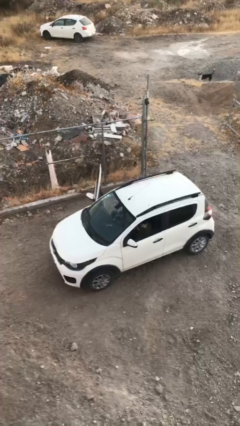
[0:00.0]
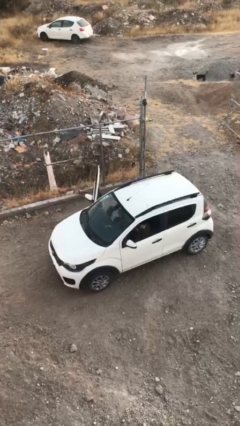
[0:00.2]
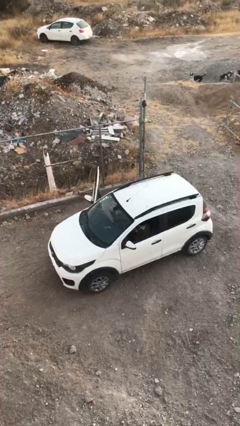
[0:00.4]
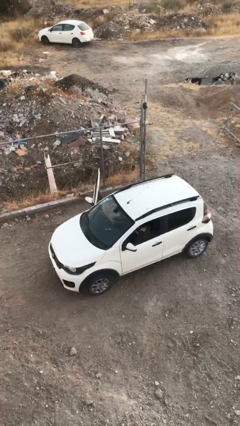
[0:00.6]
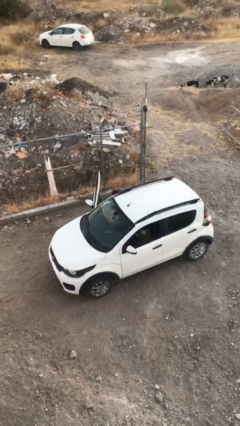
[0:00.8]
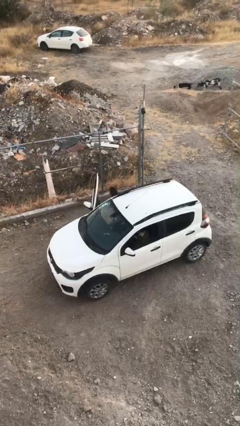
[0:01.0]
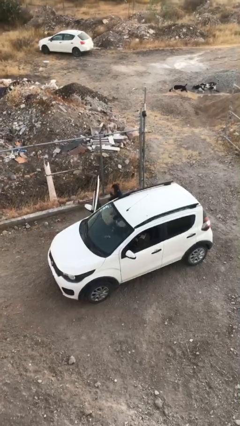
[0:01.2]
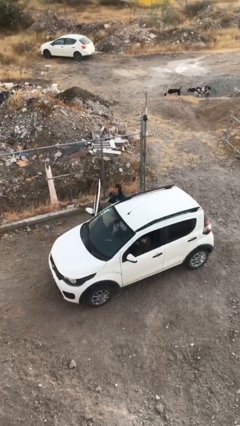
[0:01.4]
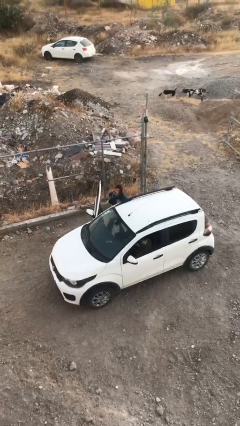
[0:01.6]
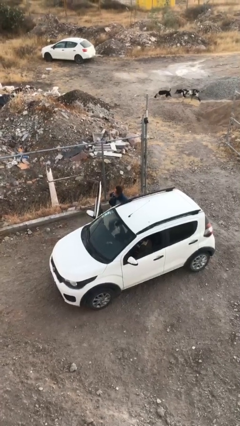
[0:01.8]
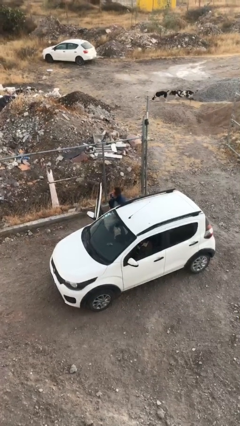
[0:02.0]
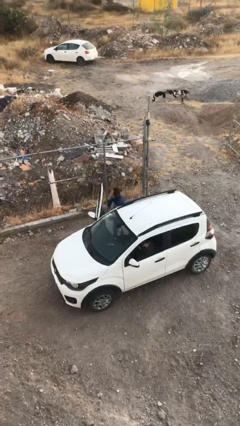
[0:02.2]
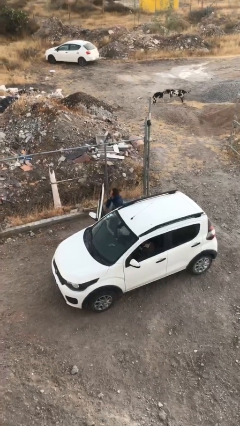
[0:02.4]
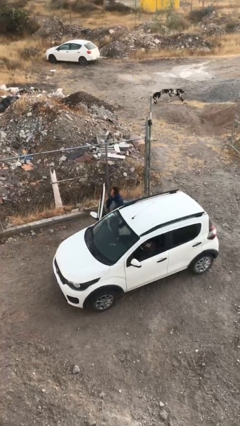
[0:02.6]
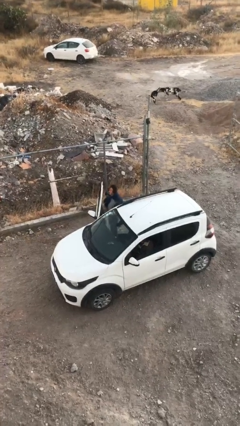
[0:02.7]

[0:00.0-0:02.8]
person exits car

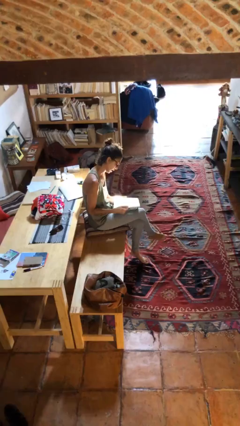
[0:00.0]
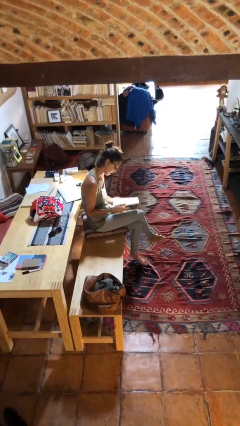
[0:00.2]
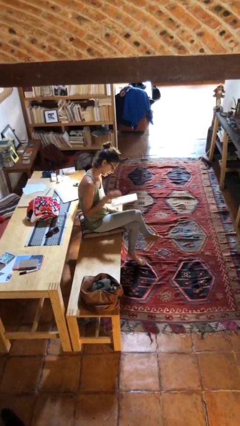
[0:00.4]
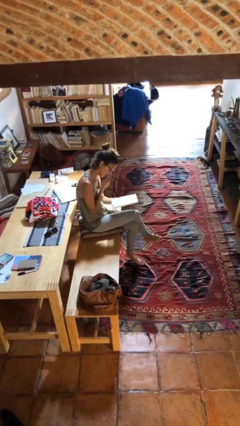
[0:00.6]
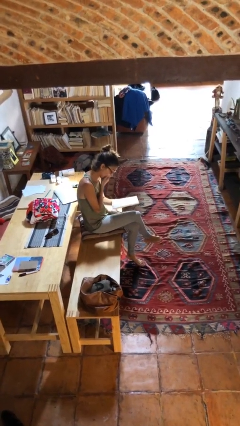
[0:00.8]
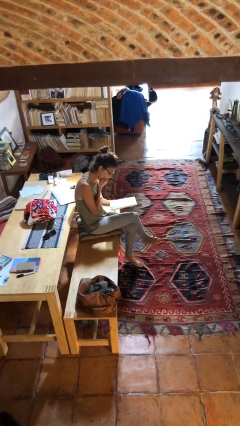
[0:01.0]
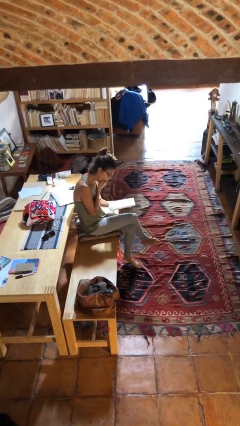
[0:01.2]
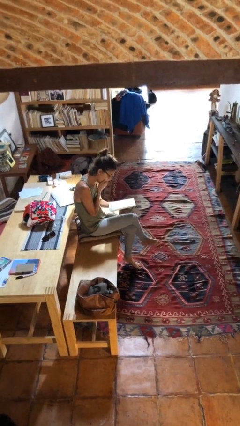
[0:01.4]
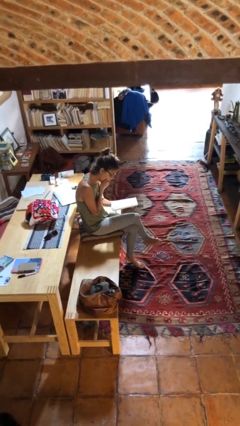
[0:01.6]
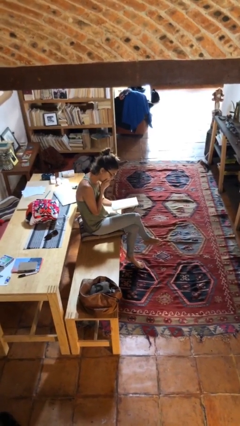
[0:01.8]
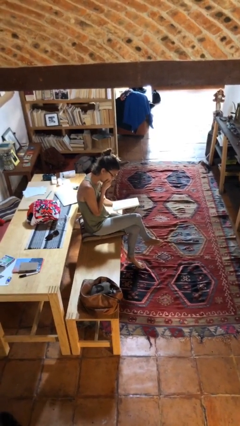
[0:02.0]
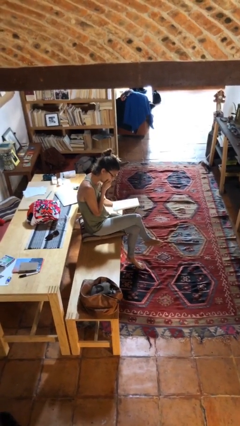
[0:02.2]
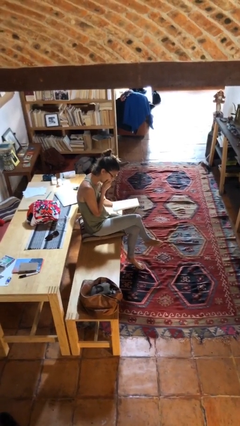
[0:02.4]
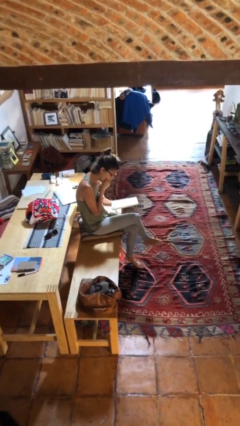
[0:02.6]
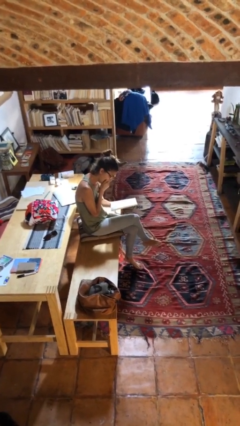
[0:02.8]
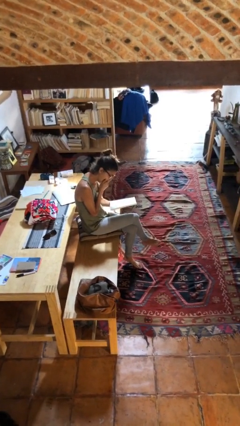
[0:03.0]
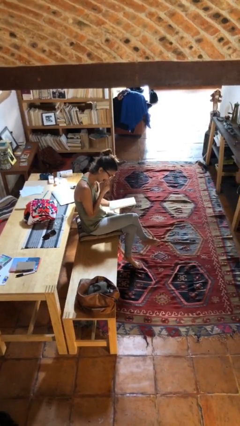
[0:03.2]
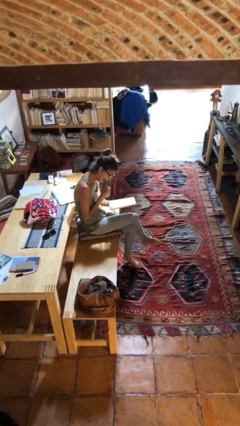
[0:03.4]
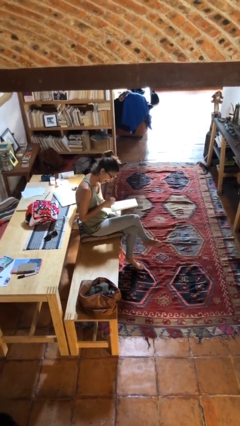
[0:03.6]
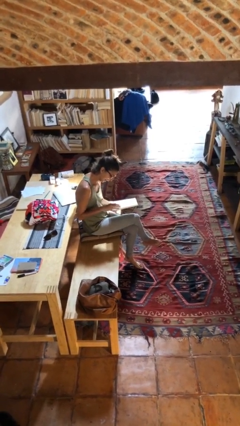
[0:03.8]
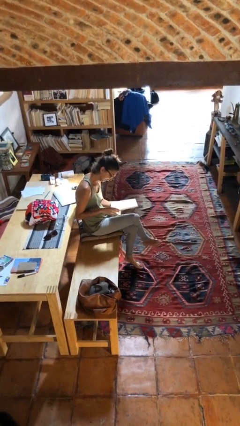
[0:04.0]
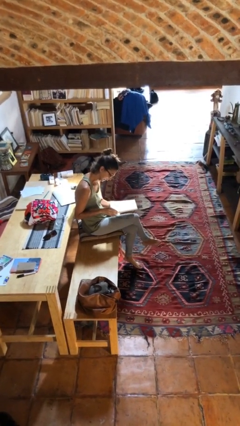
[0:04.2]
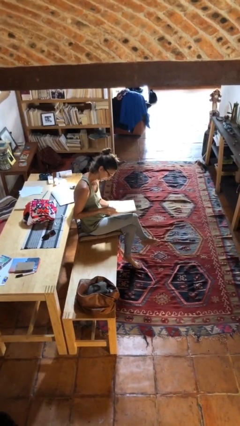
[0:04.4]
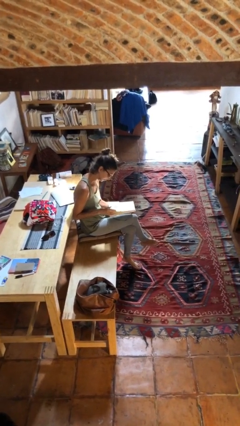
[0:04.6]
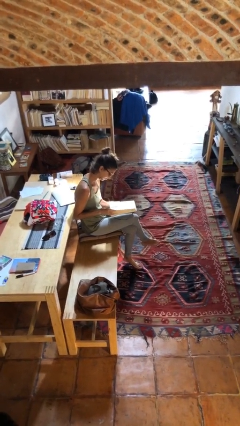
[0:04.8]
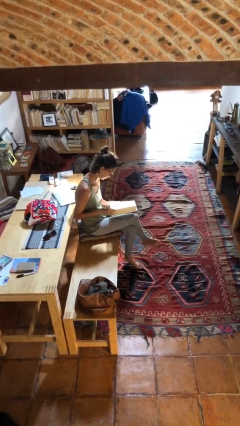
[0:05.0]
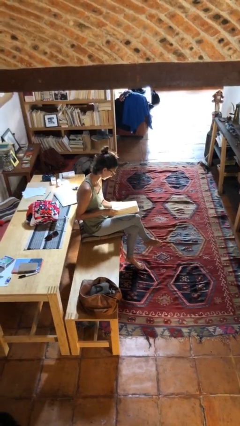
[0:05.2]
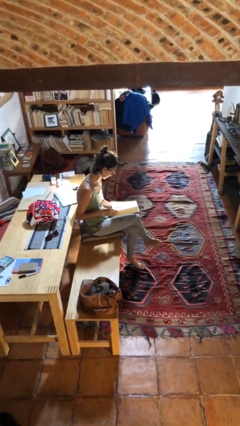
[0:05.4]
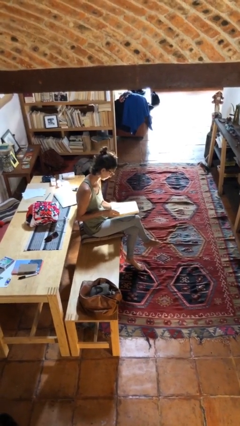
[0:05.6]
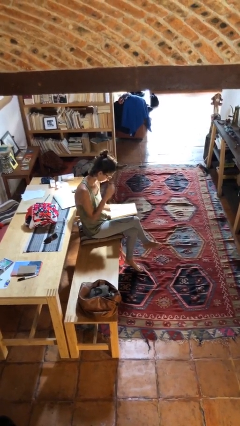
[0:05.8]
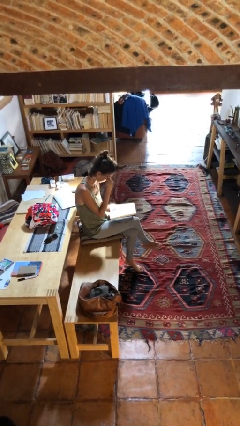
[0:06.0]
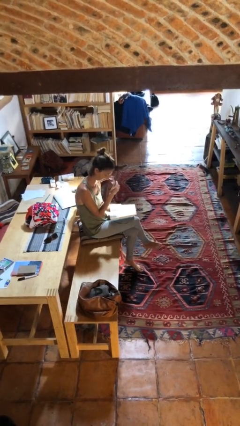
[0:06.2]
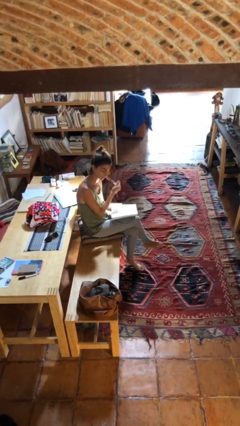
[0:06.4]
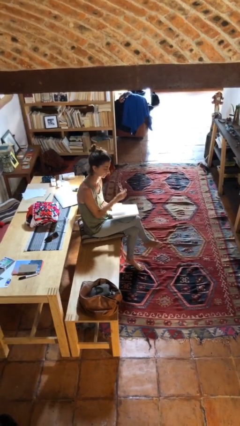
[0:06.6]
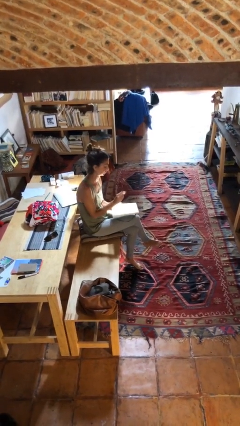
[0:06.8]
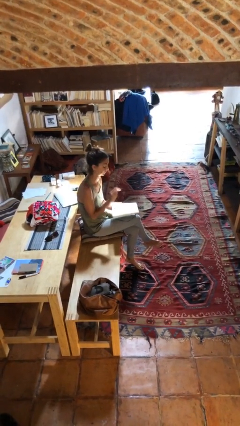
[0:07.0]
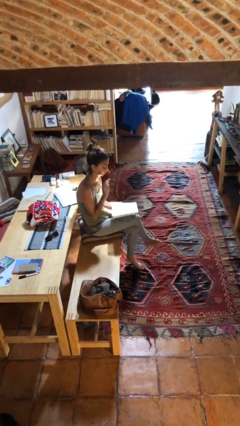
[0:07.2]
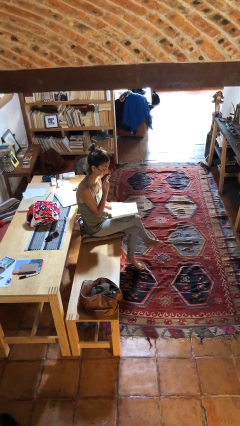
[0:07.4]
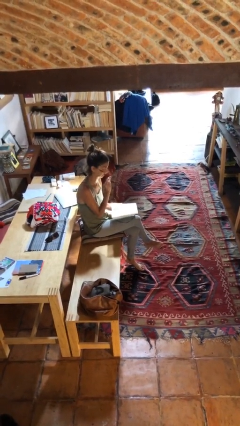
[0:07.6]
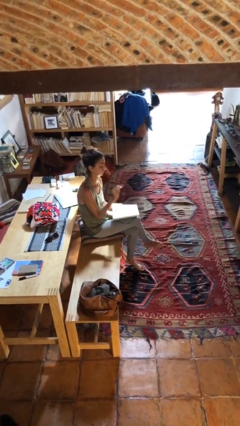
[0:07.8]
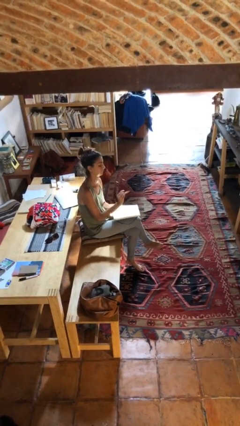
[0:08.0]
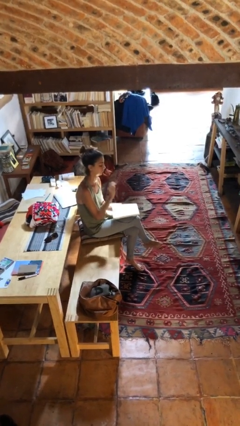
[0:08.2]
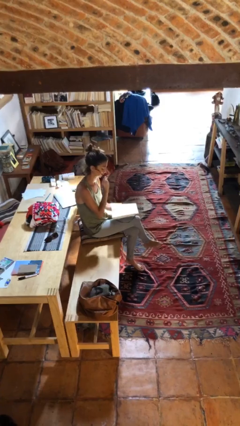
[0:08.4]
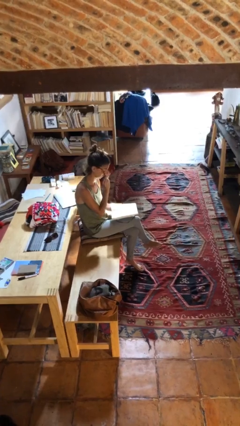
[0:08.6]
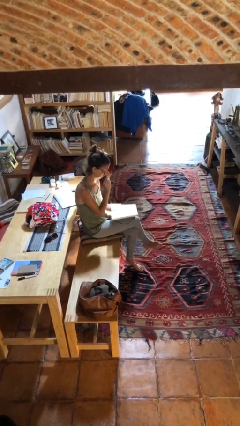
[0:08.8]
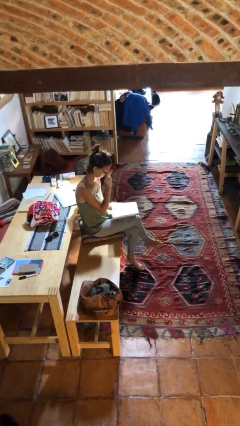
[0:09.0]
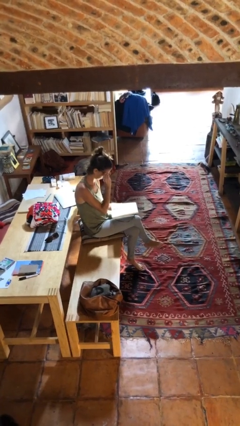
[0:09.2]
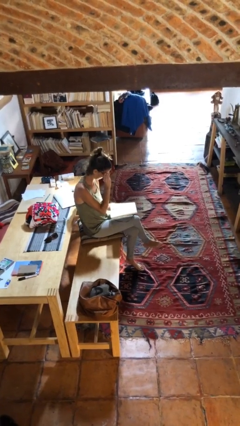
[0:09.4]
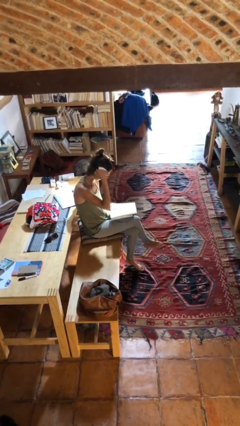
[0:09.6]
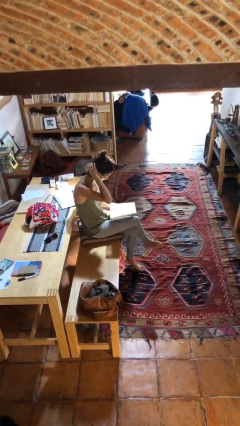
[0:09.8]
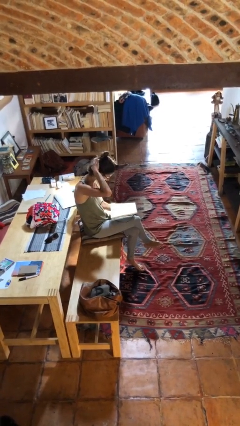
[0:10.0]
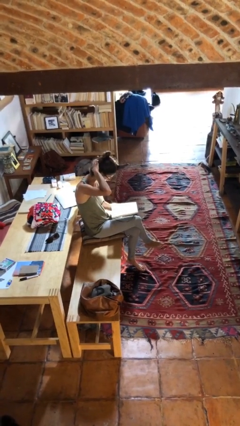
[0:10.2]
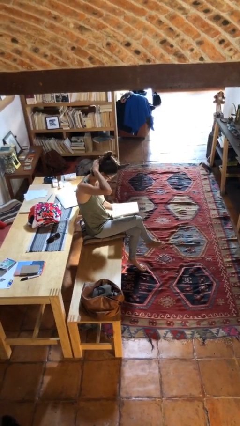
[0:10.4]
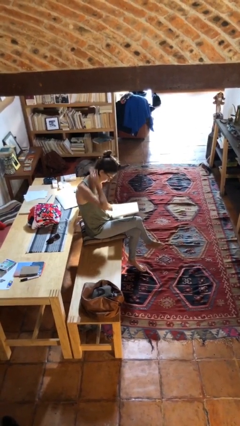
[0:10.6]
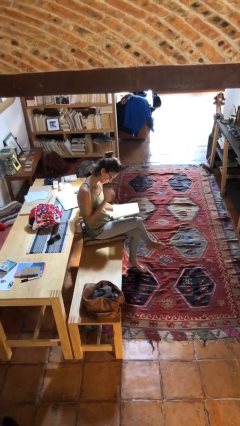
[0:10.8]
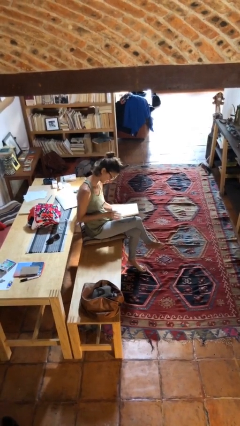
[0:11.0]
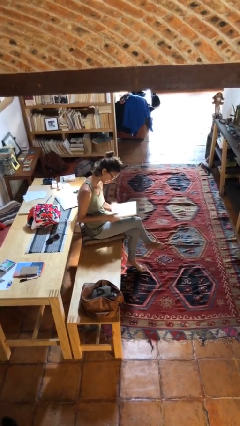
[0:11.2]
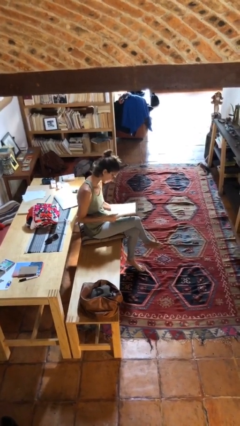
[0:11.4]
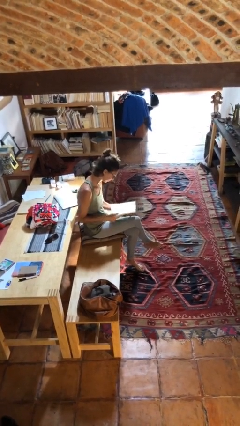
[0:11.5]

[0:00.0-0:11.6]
person reads document

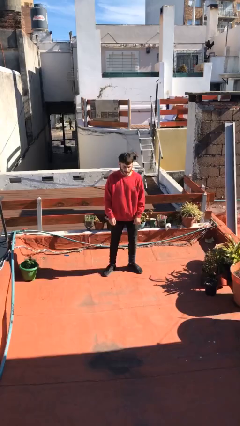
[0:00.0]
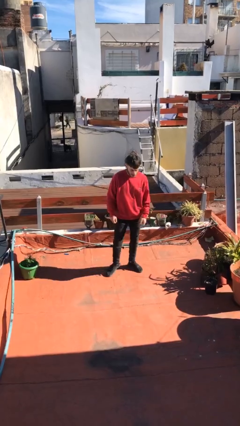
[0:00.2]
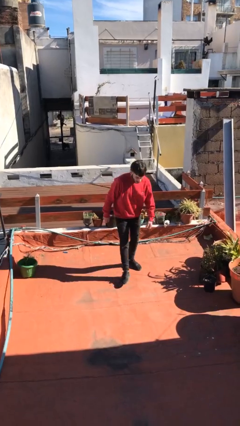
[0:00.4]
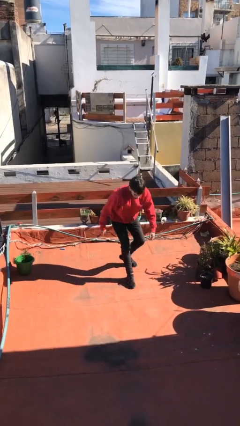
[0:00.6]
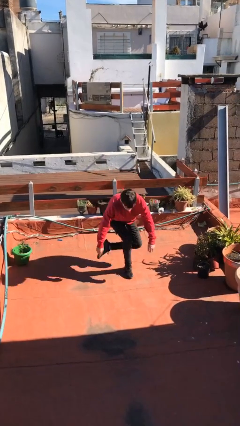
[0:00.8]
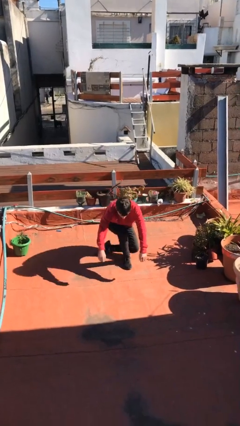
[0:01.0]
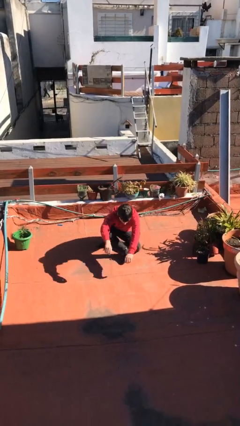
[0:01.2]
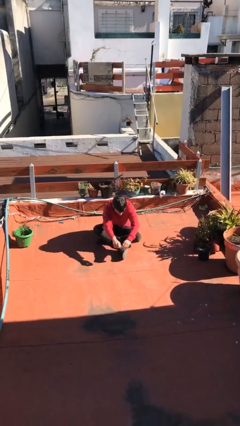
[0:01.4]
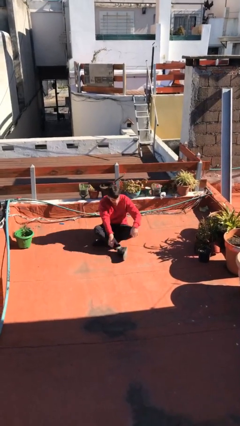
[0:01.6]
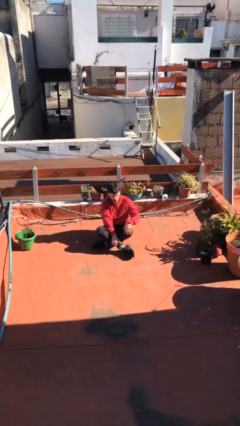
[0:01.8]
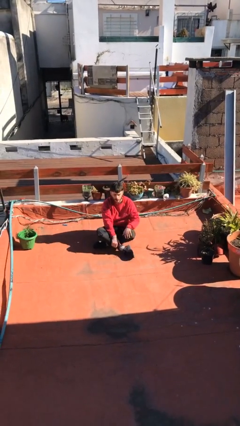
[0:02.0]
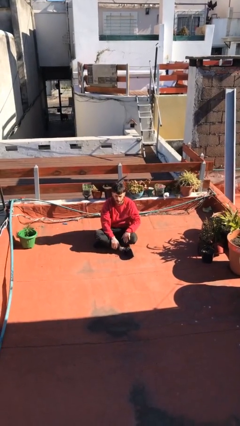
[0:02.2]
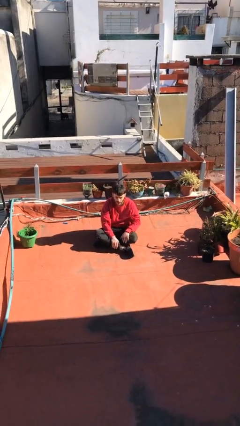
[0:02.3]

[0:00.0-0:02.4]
person sits crisscross

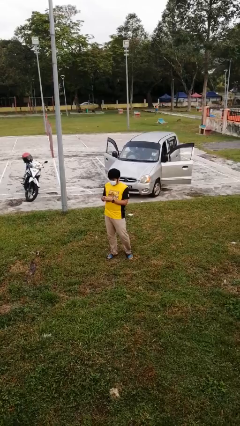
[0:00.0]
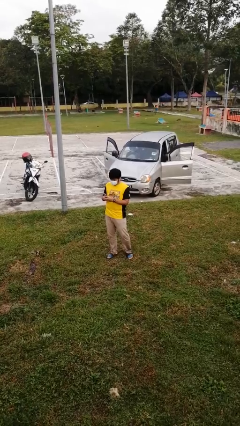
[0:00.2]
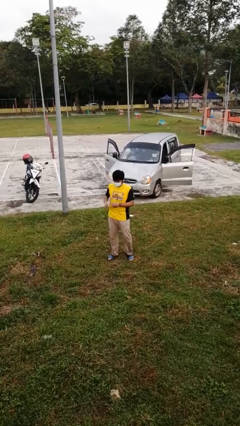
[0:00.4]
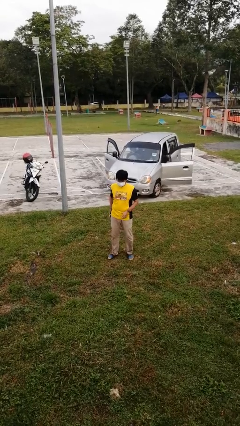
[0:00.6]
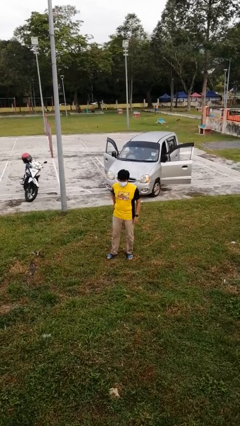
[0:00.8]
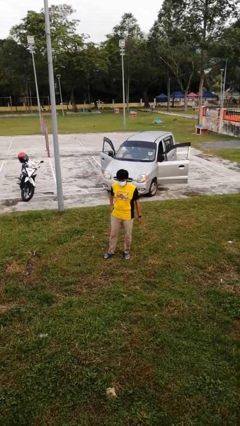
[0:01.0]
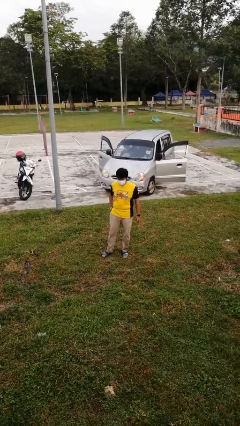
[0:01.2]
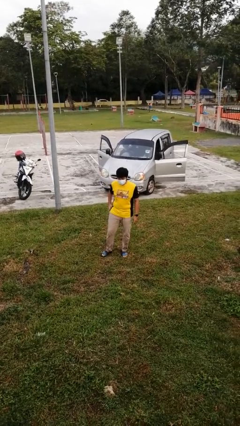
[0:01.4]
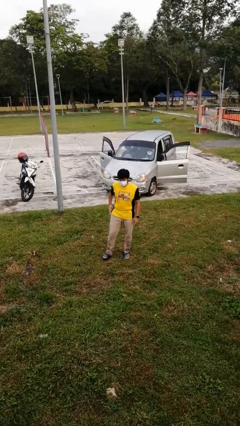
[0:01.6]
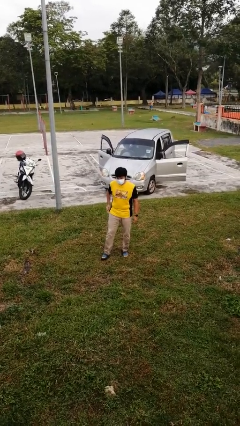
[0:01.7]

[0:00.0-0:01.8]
person puts phone into pocket
